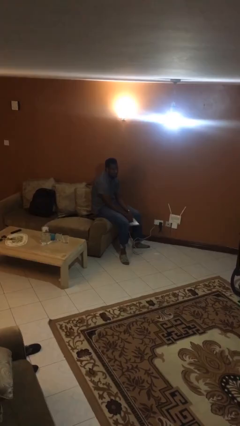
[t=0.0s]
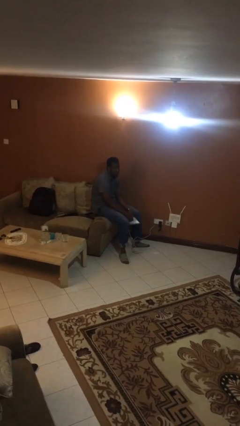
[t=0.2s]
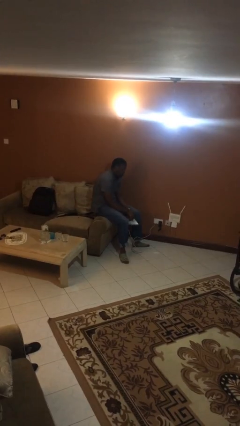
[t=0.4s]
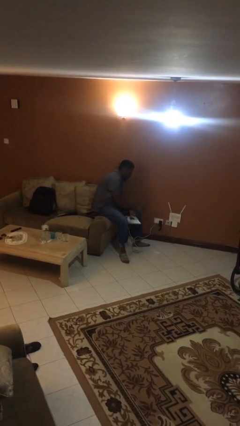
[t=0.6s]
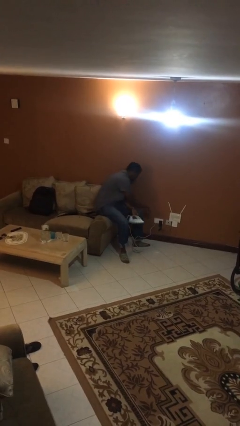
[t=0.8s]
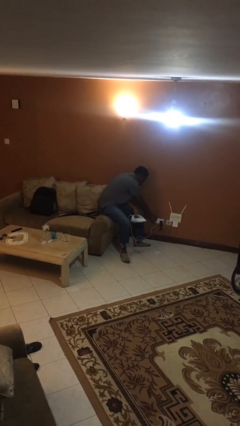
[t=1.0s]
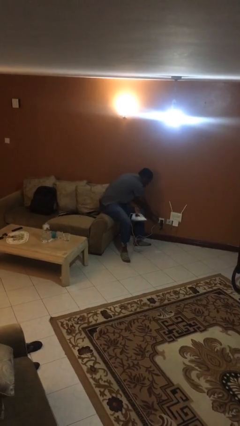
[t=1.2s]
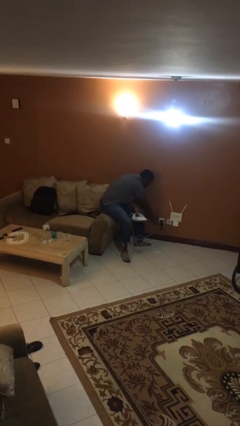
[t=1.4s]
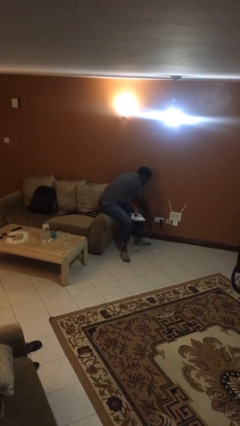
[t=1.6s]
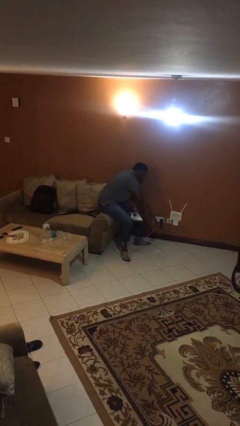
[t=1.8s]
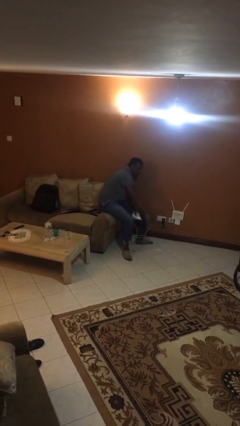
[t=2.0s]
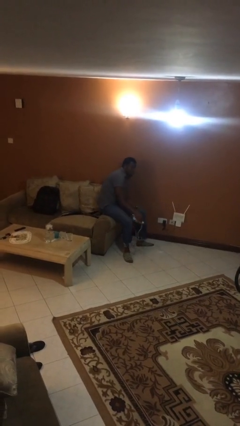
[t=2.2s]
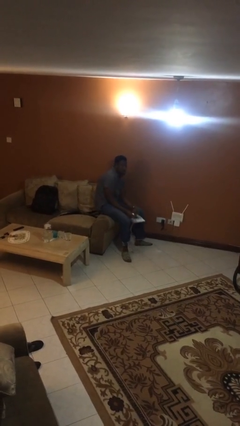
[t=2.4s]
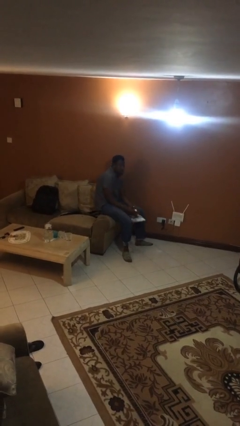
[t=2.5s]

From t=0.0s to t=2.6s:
person unplugs from electrical socket

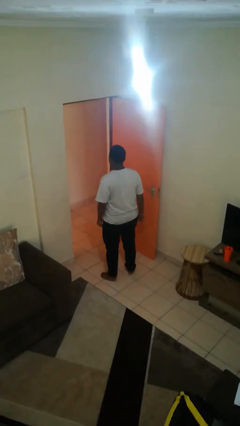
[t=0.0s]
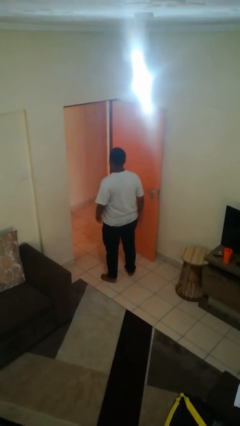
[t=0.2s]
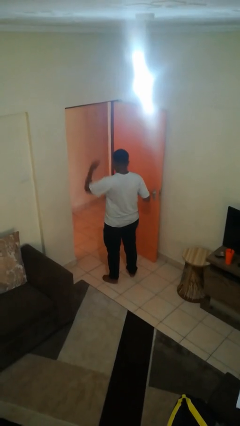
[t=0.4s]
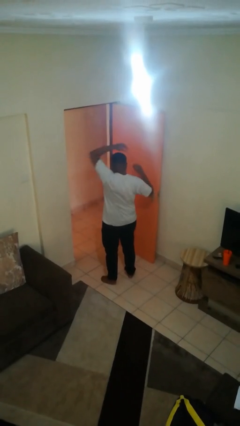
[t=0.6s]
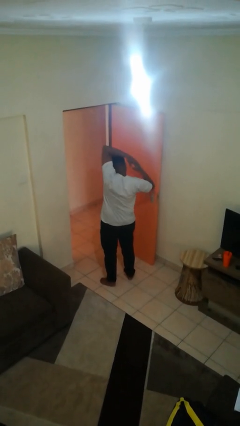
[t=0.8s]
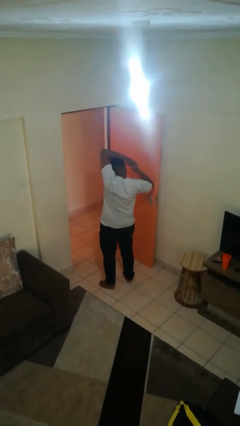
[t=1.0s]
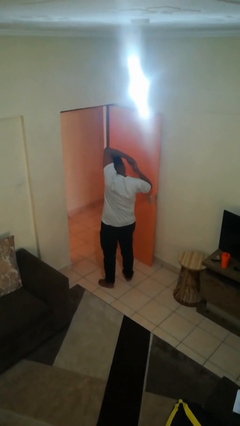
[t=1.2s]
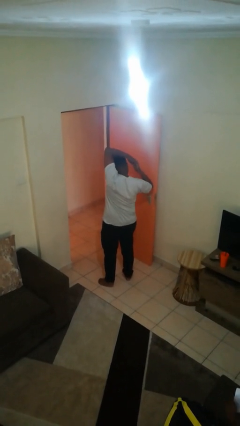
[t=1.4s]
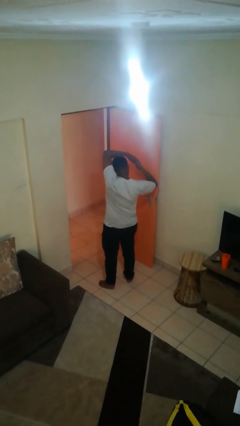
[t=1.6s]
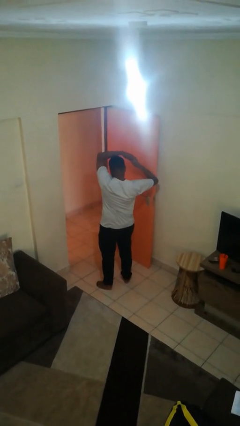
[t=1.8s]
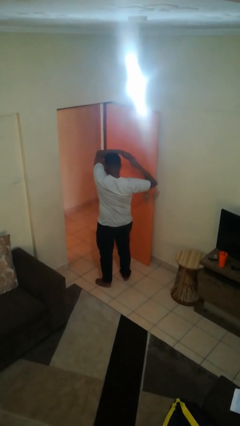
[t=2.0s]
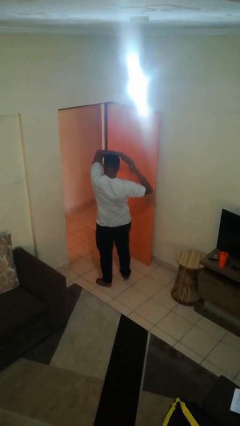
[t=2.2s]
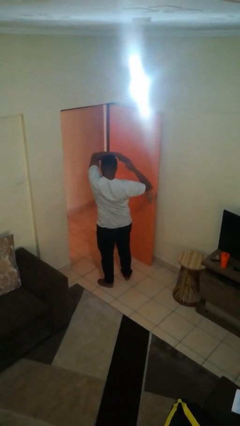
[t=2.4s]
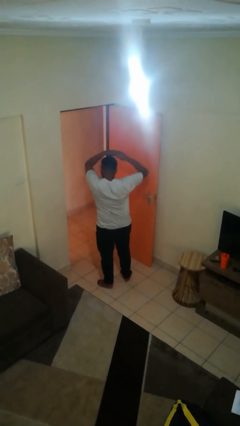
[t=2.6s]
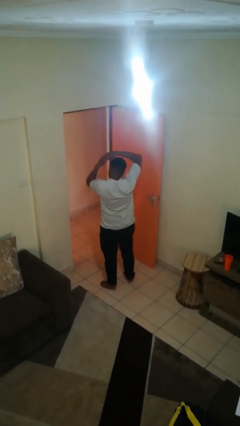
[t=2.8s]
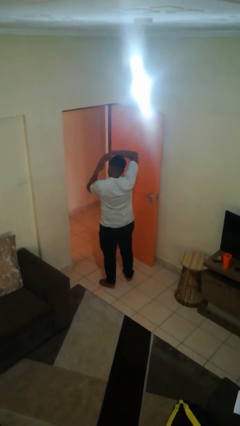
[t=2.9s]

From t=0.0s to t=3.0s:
person stretches arms over head

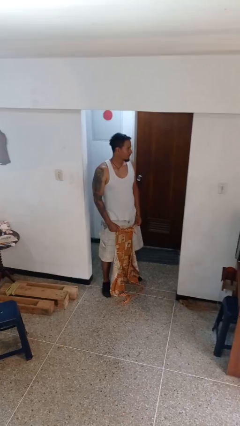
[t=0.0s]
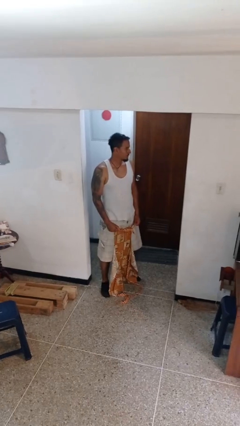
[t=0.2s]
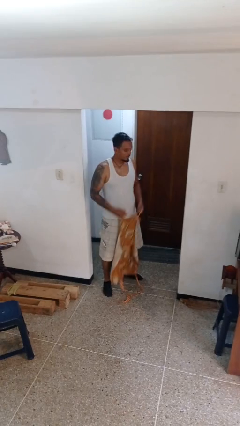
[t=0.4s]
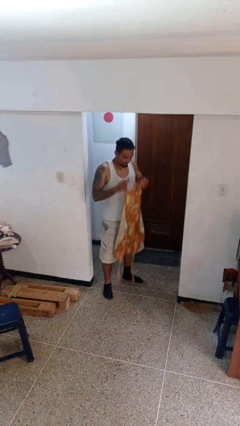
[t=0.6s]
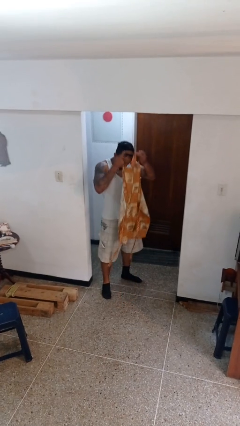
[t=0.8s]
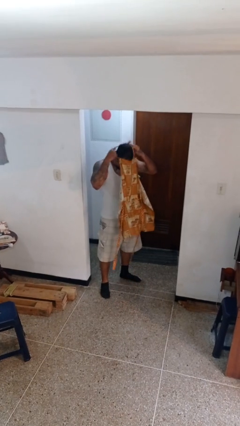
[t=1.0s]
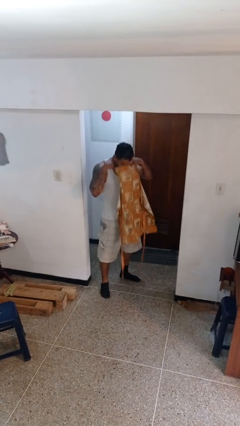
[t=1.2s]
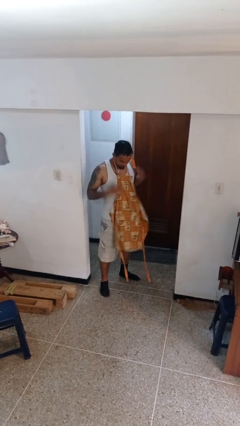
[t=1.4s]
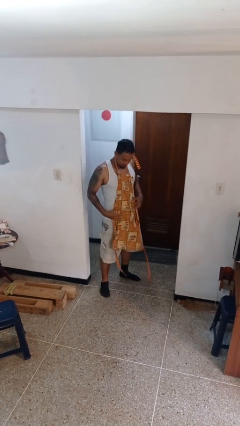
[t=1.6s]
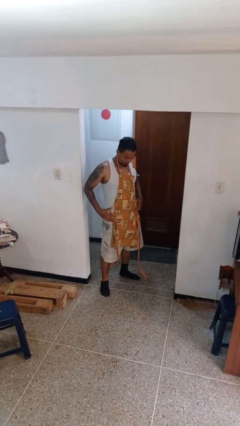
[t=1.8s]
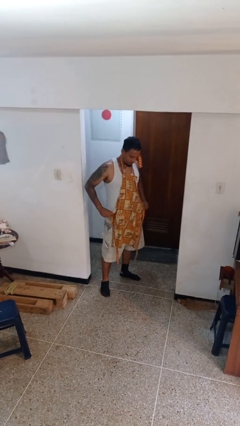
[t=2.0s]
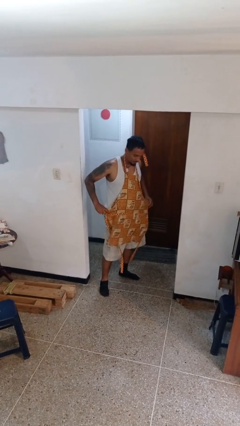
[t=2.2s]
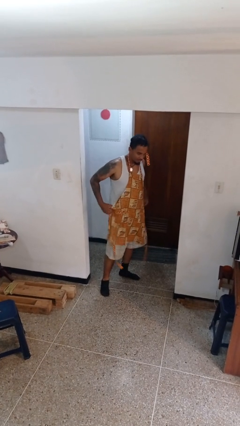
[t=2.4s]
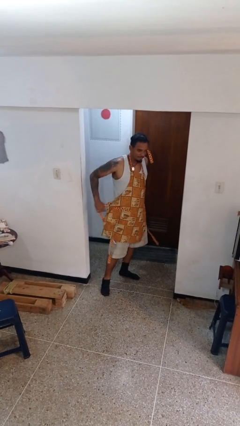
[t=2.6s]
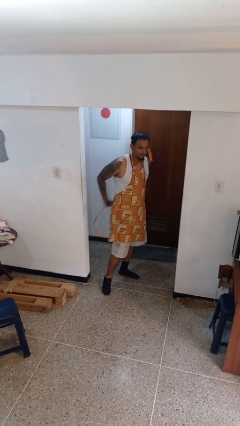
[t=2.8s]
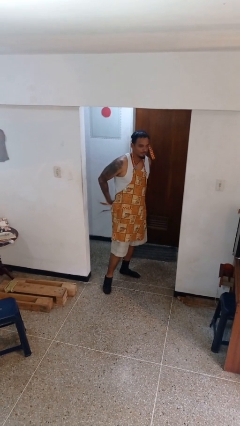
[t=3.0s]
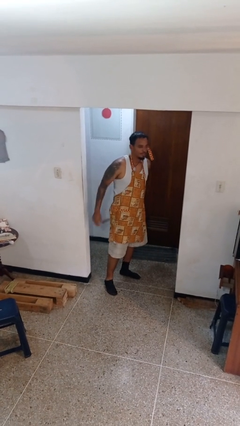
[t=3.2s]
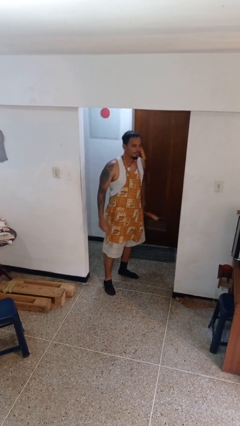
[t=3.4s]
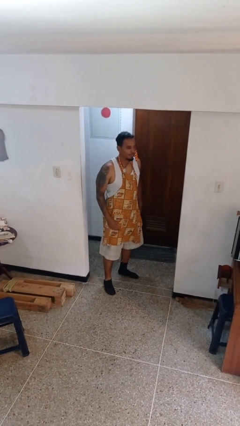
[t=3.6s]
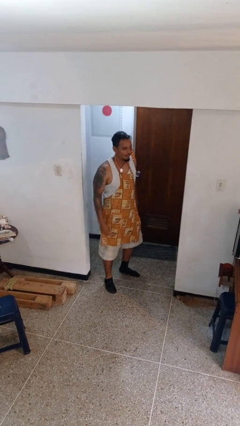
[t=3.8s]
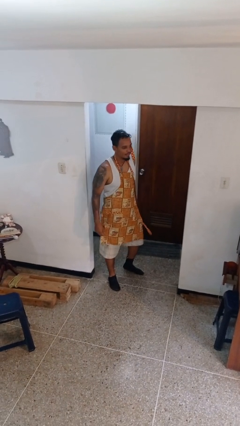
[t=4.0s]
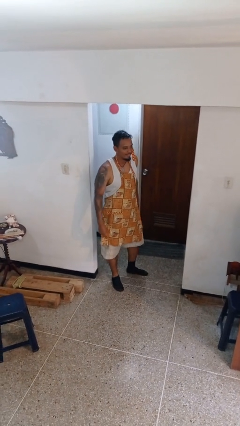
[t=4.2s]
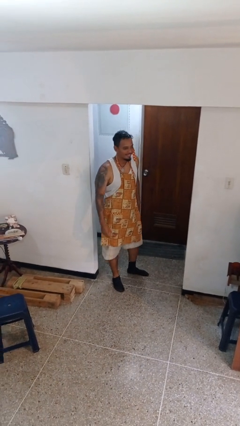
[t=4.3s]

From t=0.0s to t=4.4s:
person puts on apron

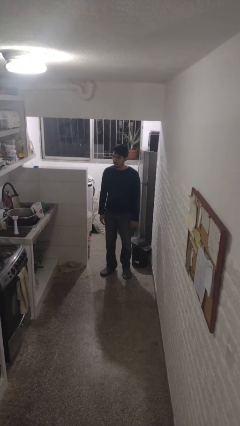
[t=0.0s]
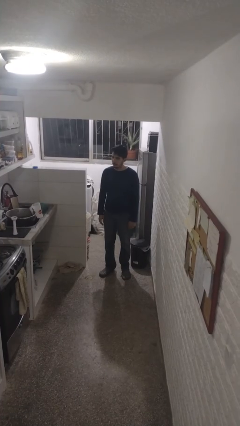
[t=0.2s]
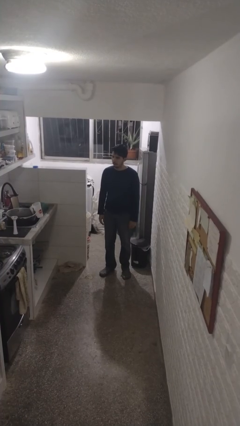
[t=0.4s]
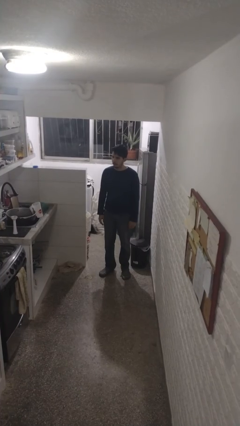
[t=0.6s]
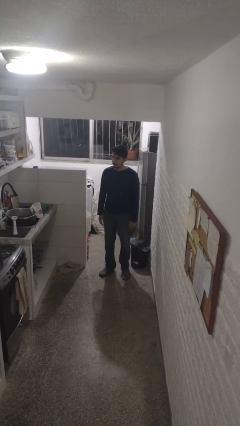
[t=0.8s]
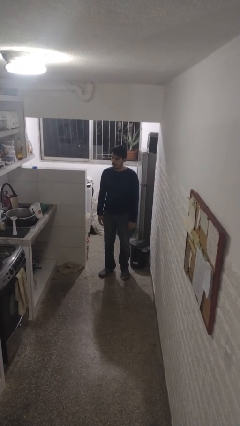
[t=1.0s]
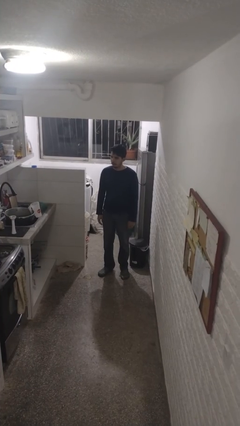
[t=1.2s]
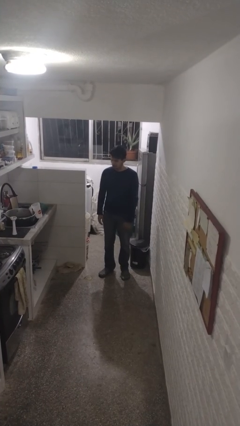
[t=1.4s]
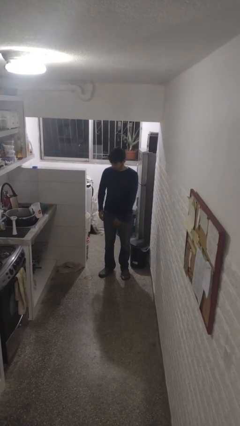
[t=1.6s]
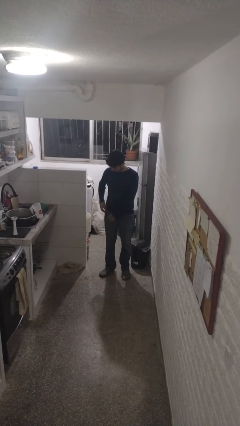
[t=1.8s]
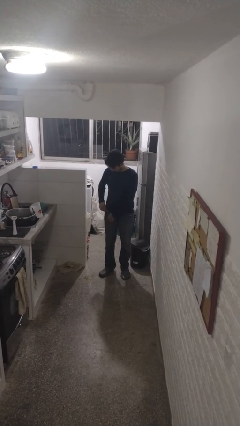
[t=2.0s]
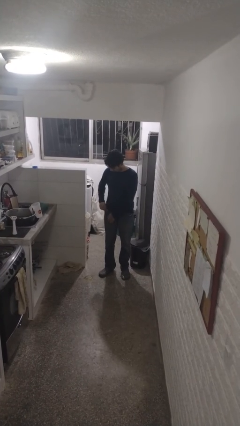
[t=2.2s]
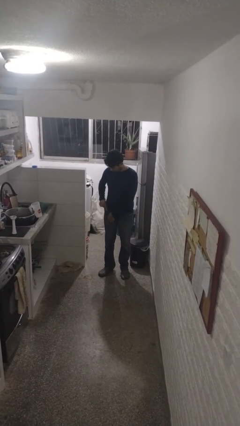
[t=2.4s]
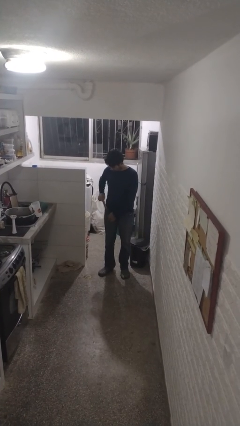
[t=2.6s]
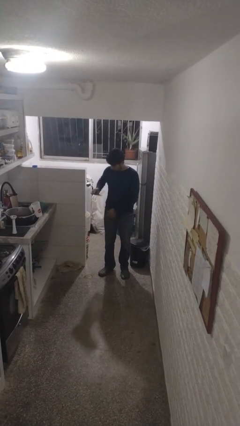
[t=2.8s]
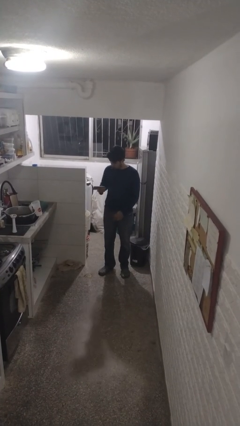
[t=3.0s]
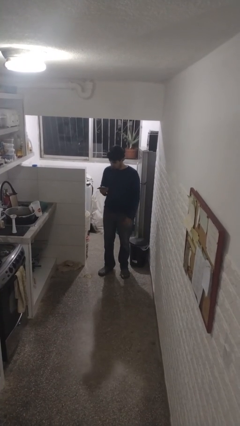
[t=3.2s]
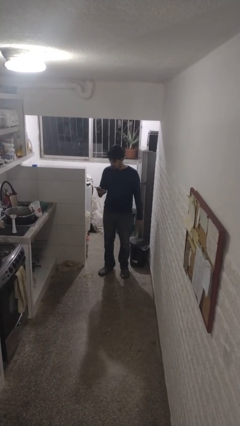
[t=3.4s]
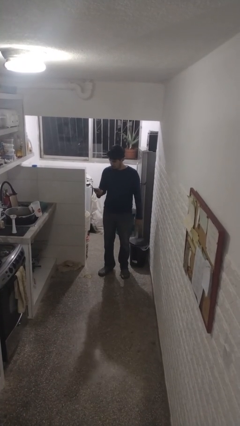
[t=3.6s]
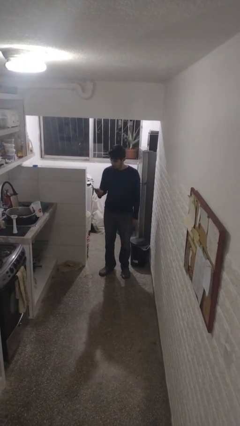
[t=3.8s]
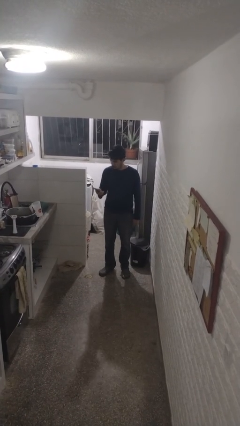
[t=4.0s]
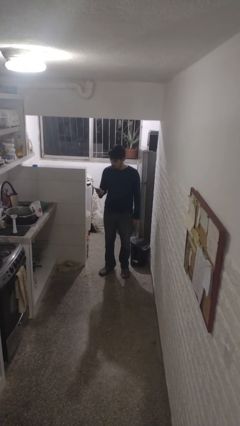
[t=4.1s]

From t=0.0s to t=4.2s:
person takes phone from pocket

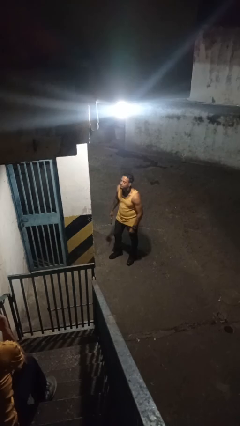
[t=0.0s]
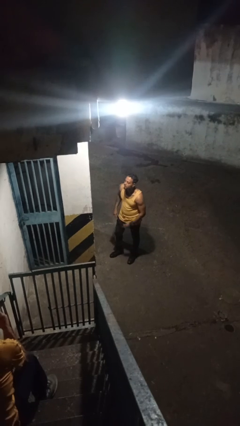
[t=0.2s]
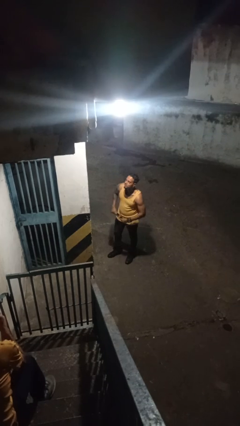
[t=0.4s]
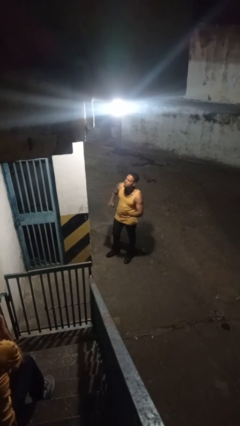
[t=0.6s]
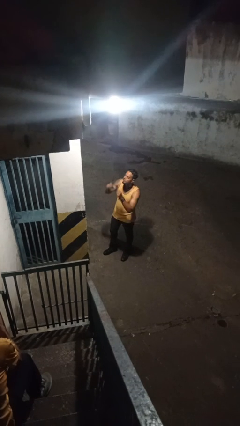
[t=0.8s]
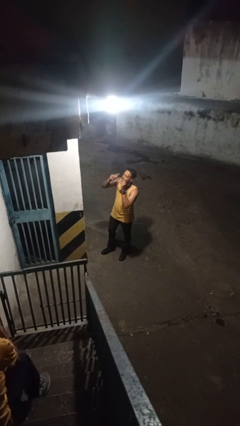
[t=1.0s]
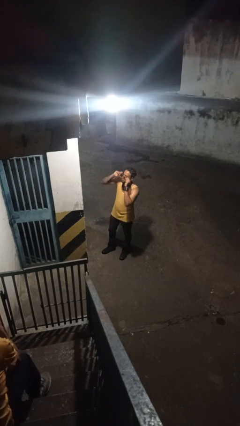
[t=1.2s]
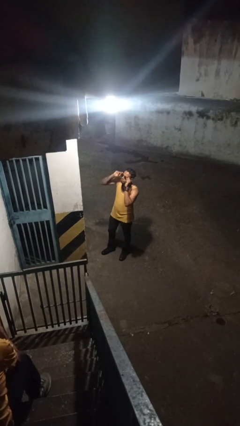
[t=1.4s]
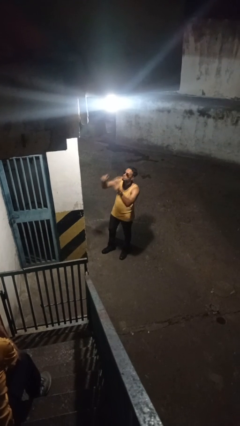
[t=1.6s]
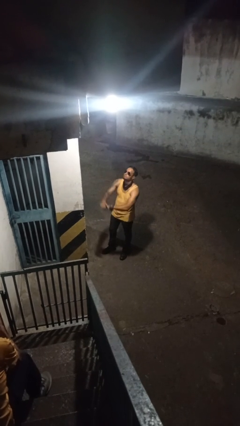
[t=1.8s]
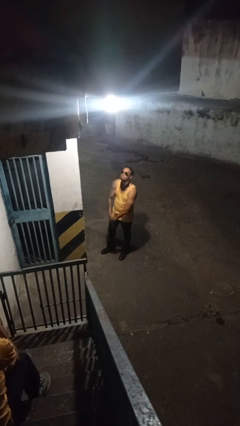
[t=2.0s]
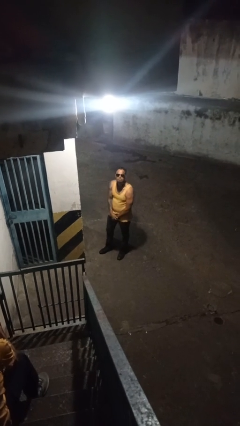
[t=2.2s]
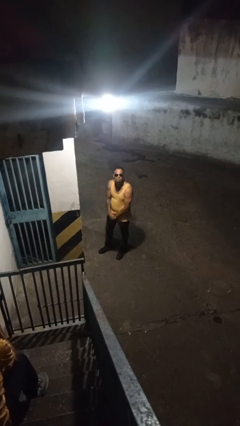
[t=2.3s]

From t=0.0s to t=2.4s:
person puts on sunglasses

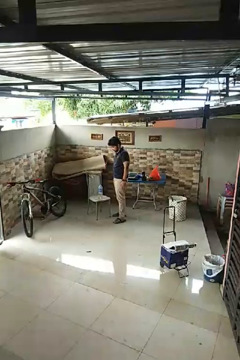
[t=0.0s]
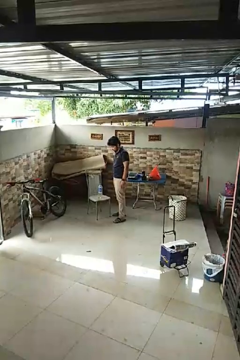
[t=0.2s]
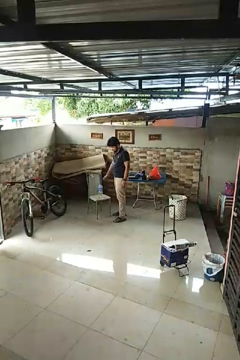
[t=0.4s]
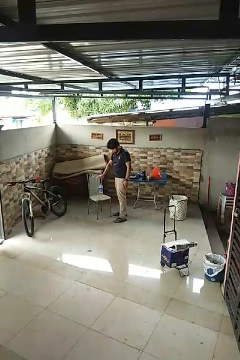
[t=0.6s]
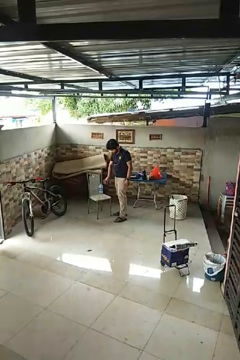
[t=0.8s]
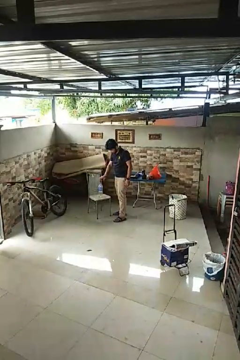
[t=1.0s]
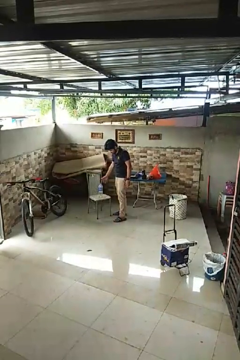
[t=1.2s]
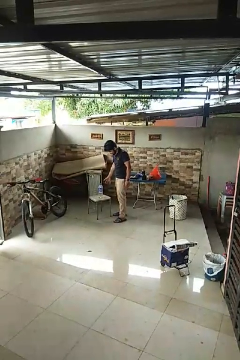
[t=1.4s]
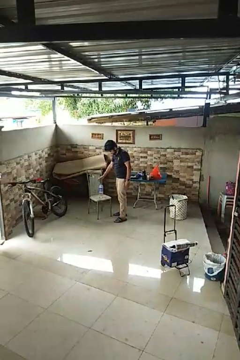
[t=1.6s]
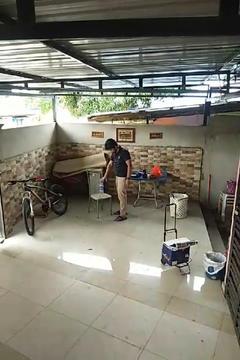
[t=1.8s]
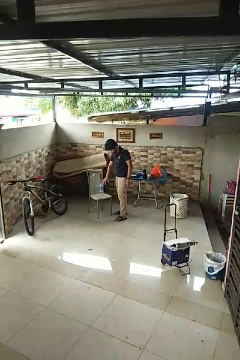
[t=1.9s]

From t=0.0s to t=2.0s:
person waves hand over object
